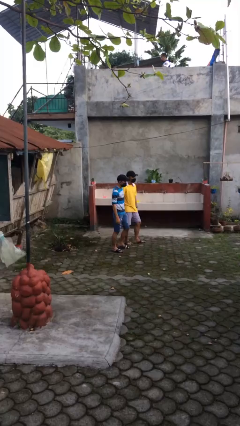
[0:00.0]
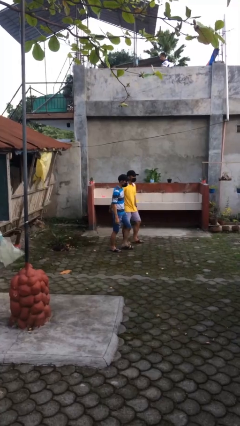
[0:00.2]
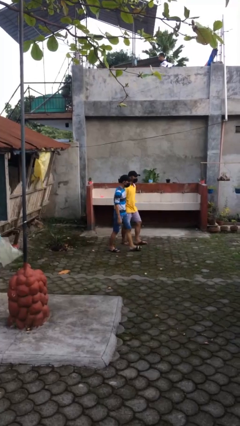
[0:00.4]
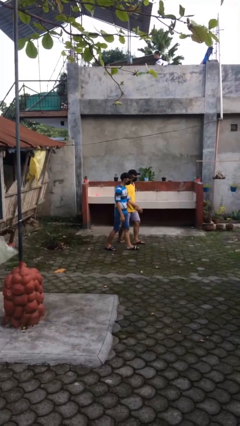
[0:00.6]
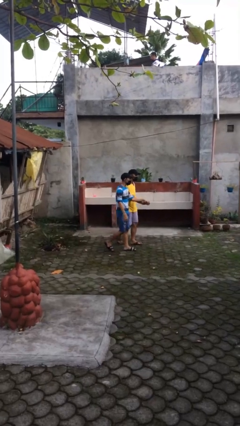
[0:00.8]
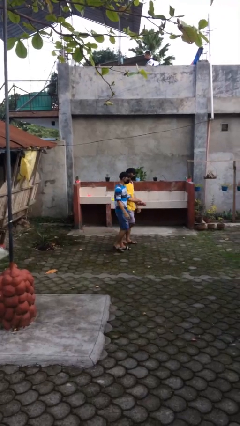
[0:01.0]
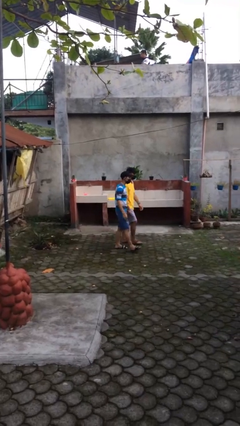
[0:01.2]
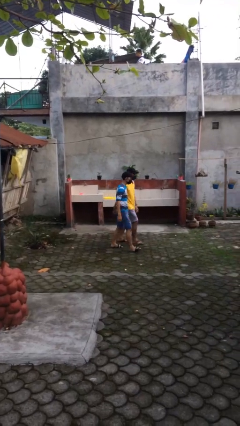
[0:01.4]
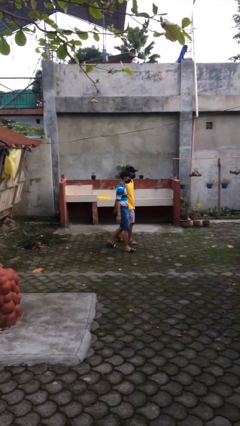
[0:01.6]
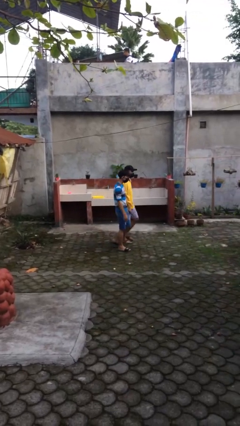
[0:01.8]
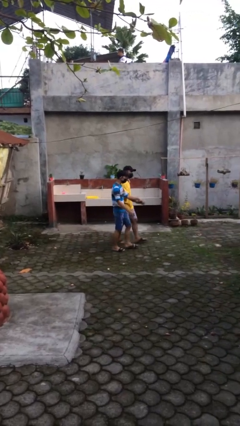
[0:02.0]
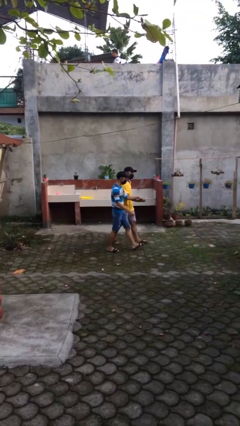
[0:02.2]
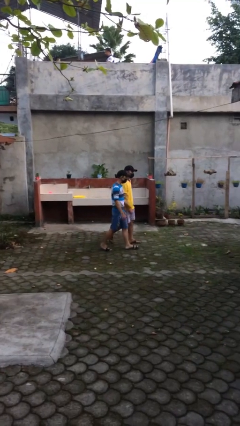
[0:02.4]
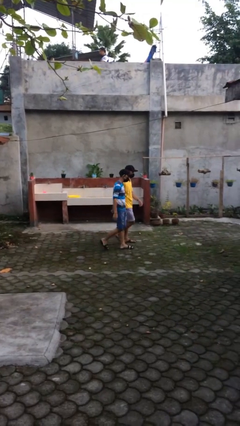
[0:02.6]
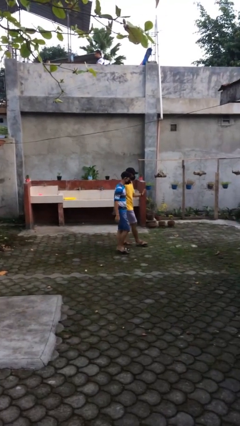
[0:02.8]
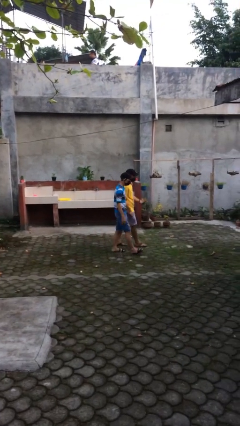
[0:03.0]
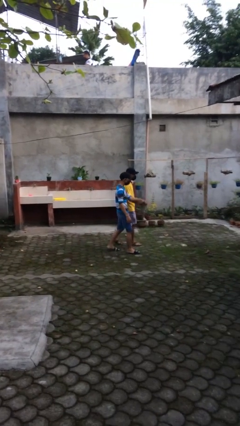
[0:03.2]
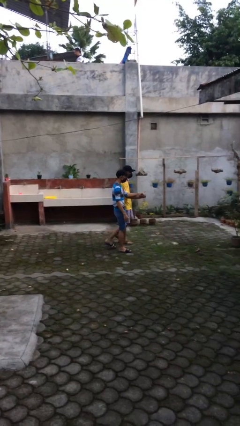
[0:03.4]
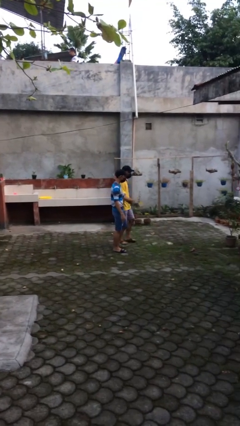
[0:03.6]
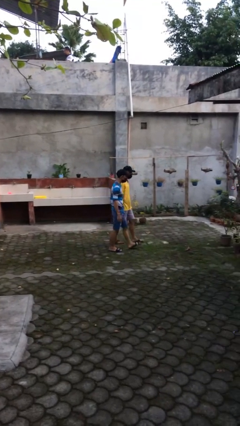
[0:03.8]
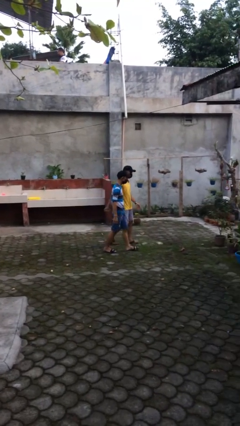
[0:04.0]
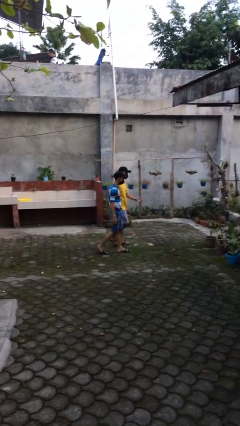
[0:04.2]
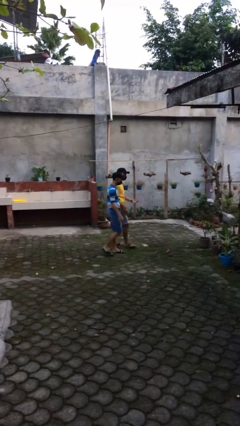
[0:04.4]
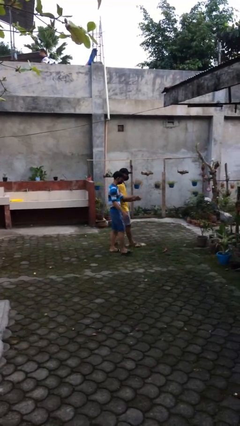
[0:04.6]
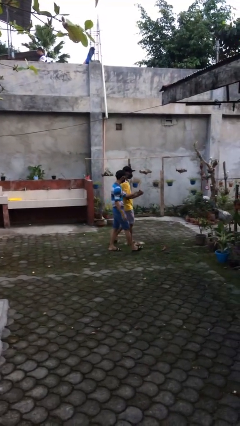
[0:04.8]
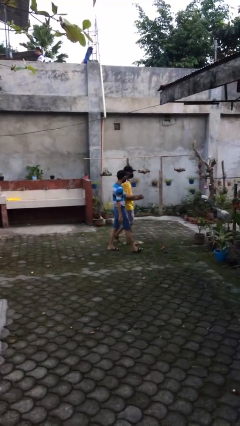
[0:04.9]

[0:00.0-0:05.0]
person holds hand

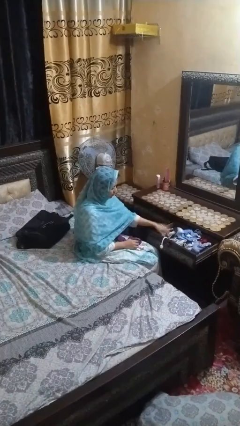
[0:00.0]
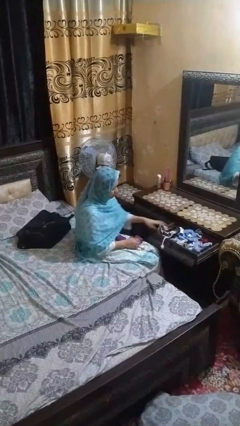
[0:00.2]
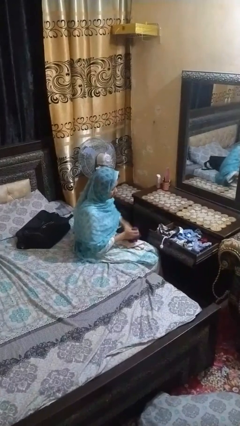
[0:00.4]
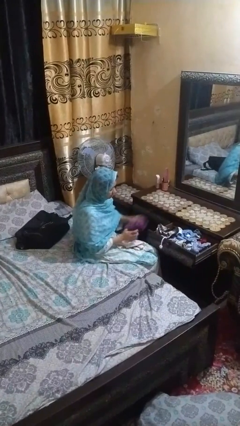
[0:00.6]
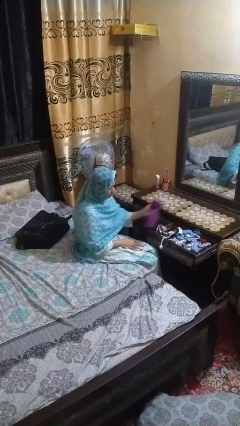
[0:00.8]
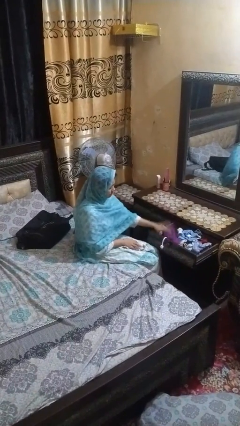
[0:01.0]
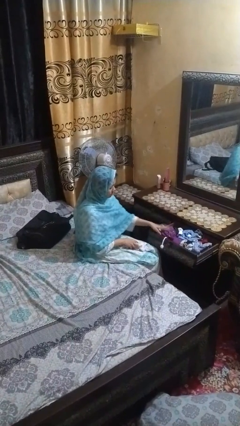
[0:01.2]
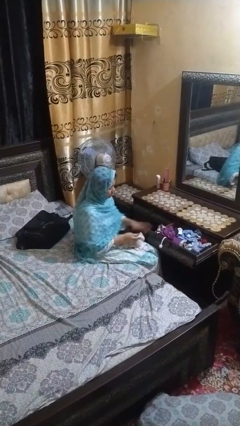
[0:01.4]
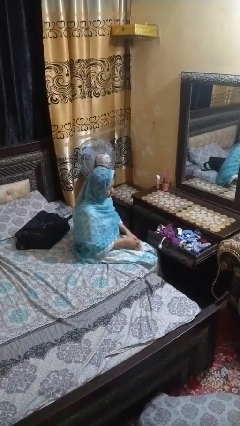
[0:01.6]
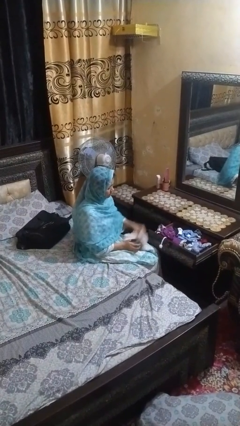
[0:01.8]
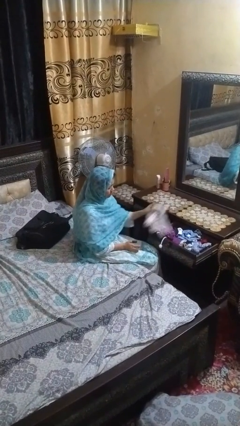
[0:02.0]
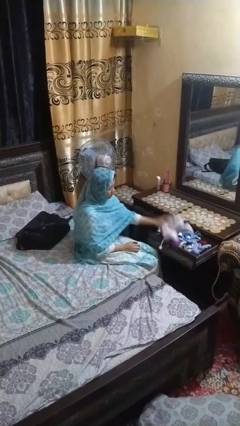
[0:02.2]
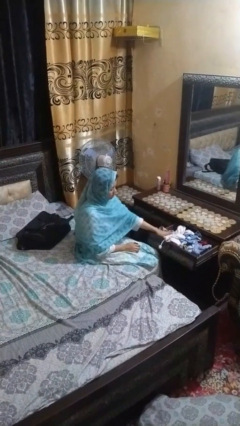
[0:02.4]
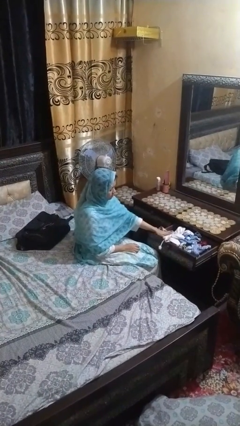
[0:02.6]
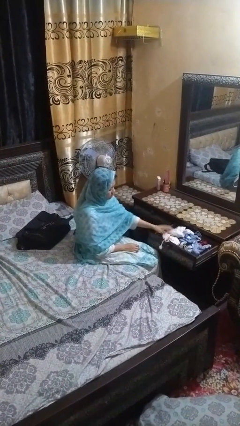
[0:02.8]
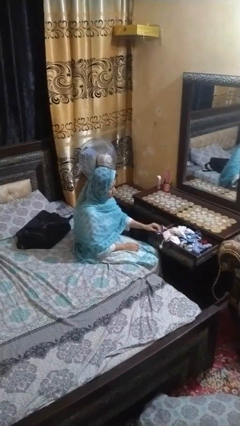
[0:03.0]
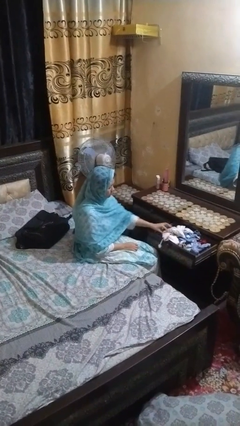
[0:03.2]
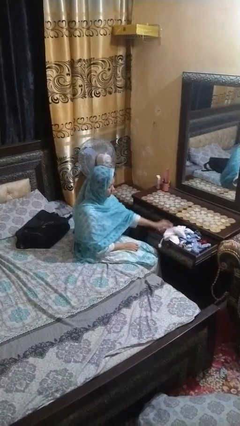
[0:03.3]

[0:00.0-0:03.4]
person puts clothes into dresser

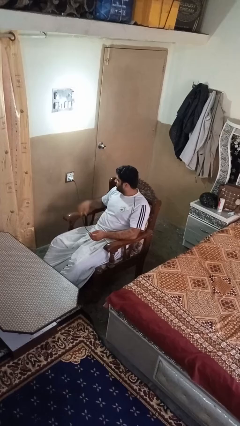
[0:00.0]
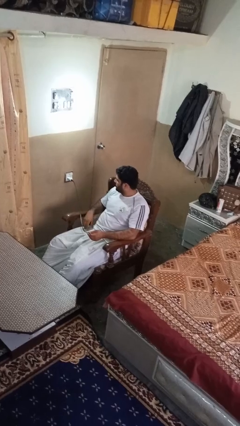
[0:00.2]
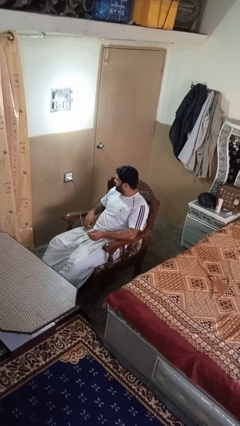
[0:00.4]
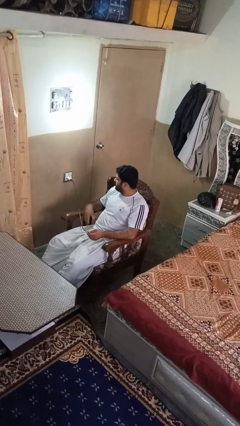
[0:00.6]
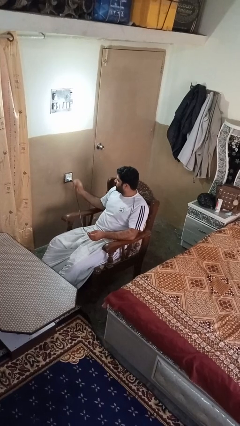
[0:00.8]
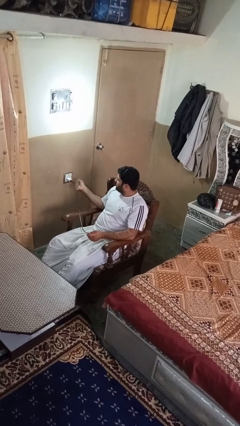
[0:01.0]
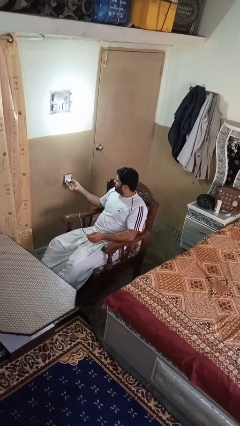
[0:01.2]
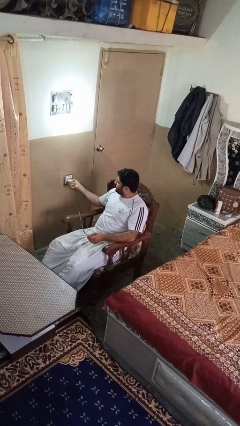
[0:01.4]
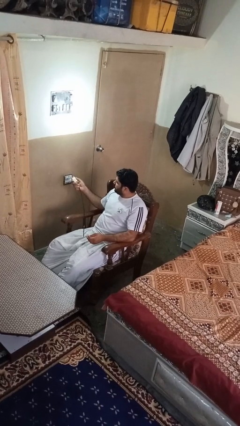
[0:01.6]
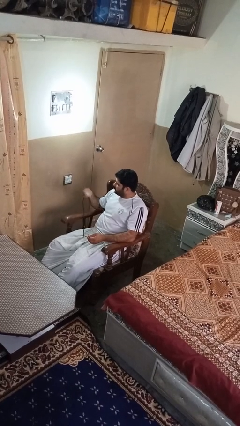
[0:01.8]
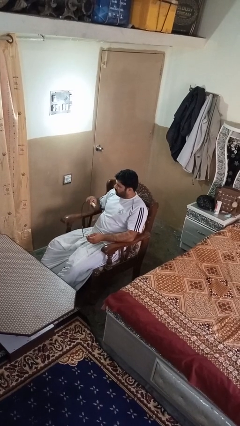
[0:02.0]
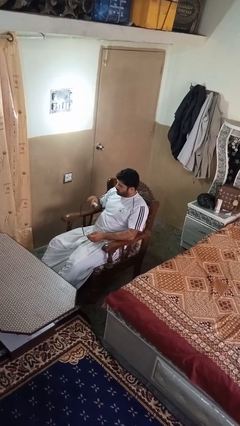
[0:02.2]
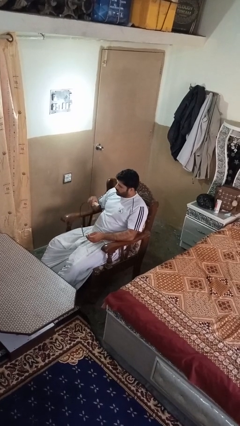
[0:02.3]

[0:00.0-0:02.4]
person unplugs from electrical socket

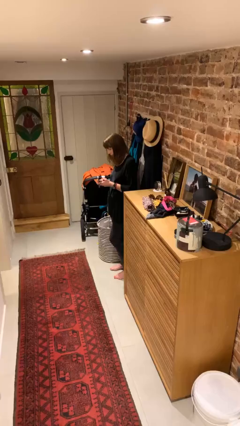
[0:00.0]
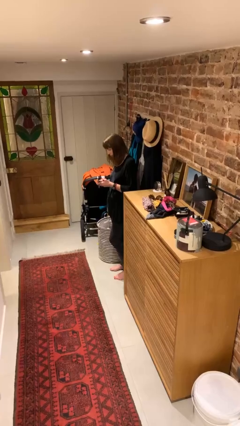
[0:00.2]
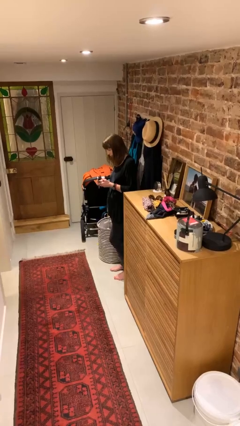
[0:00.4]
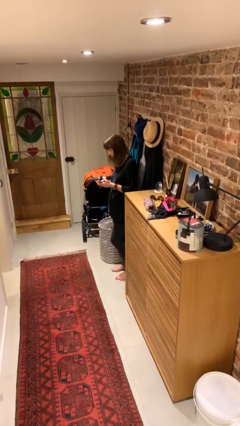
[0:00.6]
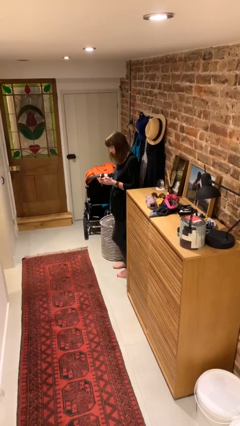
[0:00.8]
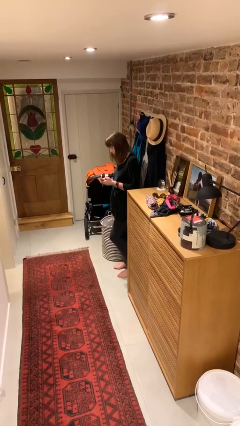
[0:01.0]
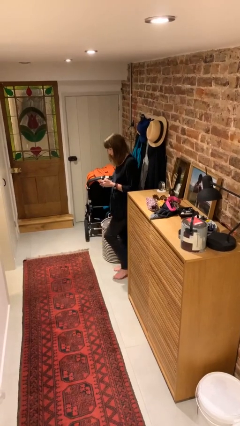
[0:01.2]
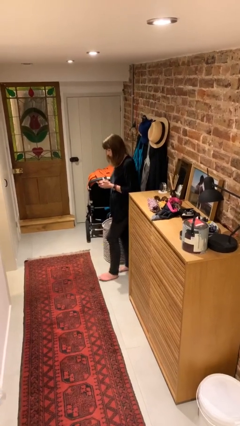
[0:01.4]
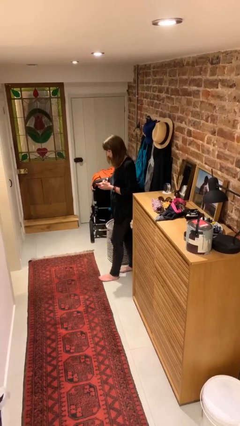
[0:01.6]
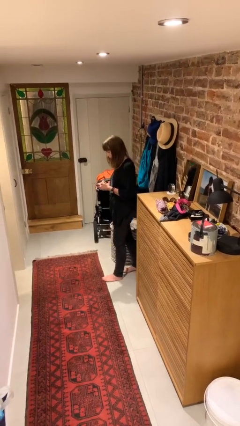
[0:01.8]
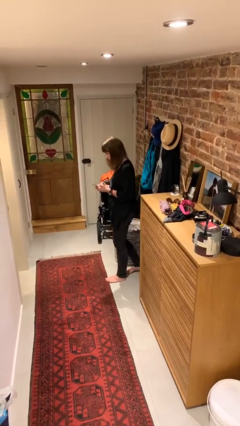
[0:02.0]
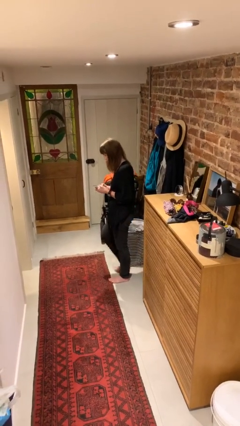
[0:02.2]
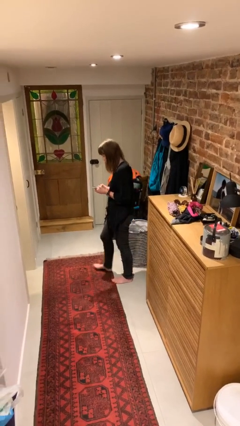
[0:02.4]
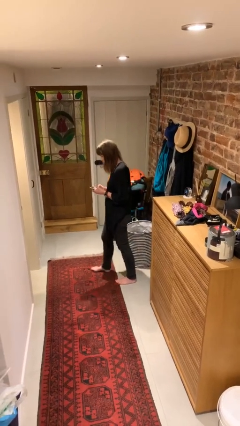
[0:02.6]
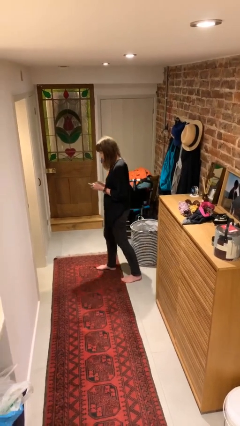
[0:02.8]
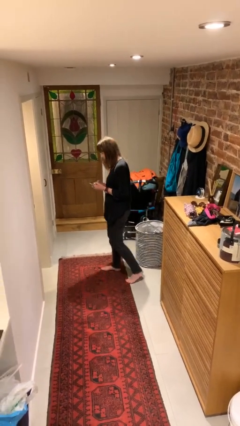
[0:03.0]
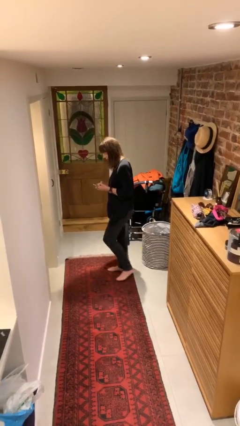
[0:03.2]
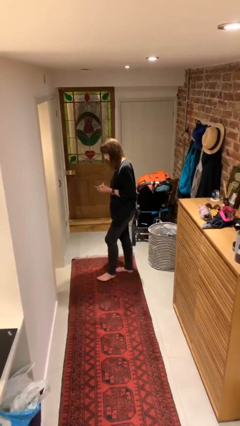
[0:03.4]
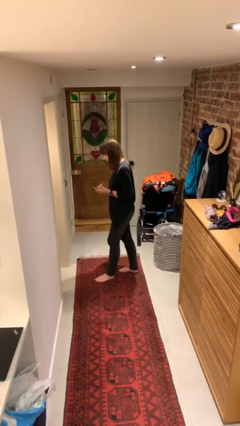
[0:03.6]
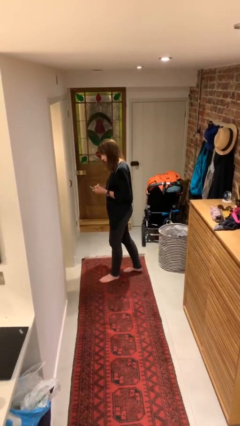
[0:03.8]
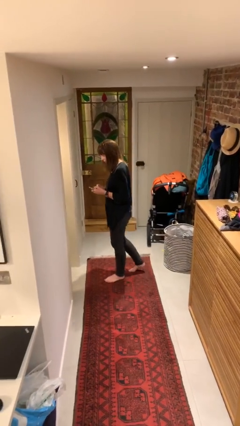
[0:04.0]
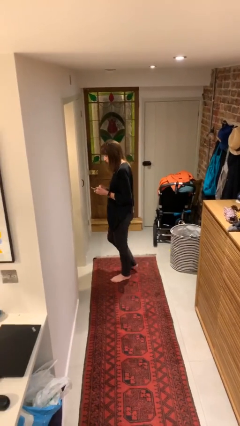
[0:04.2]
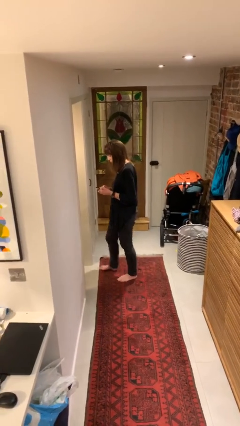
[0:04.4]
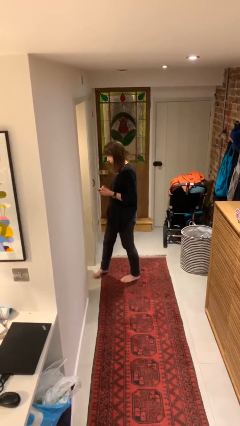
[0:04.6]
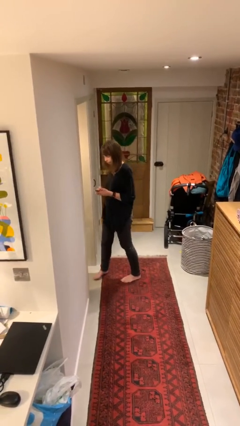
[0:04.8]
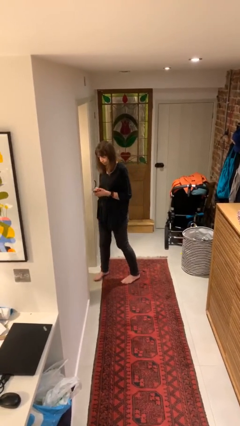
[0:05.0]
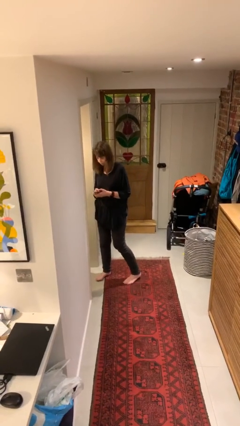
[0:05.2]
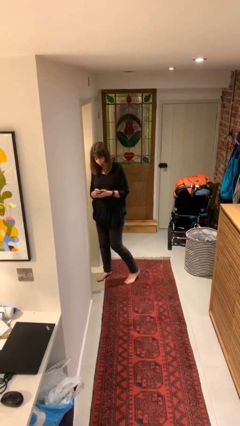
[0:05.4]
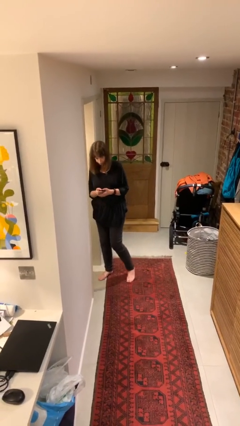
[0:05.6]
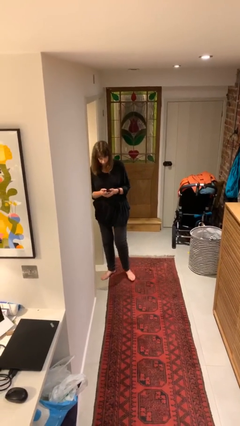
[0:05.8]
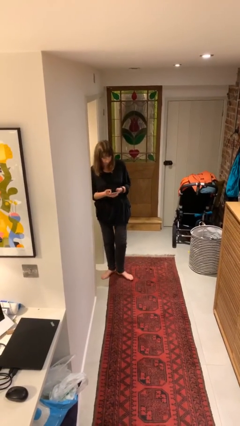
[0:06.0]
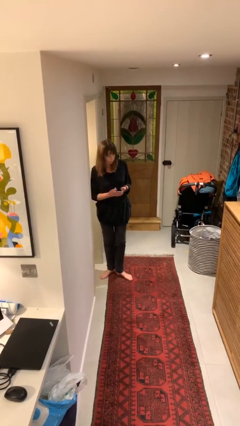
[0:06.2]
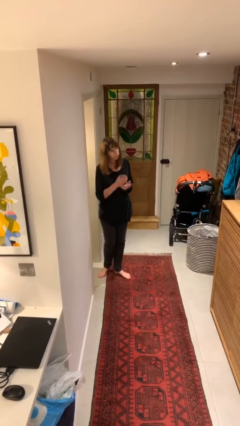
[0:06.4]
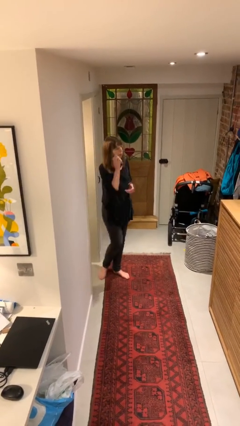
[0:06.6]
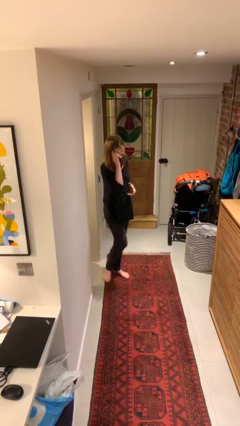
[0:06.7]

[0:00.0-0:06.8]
person texts on phone
